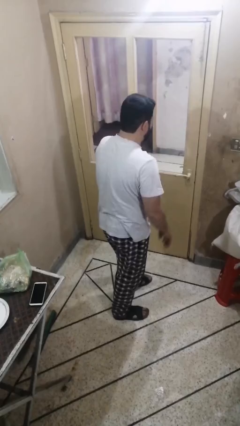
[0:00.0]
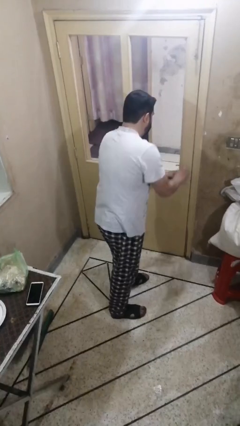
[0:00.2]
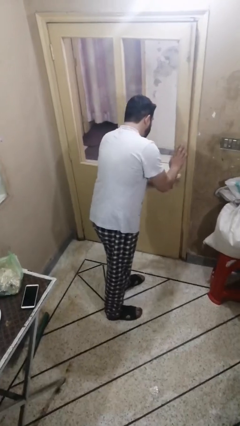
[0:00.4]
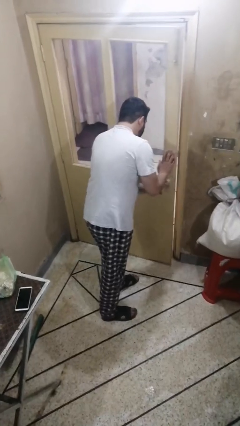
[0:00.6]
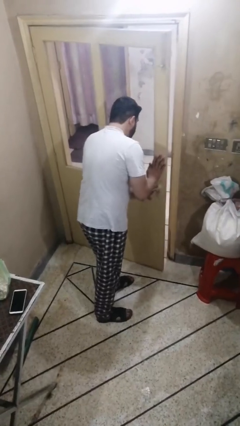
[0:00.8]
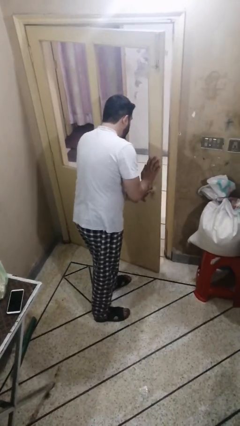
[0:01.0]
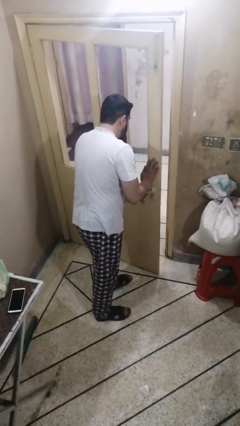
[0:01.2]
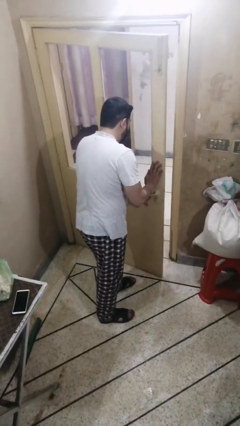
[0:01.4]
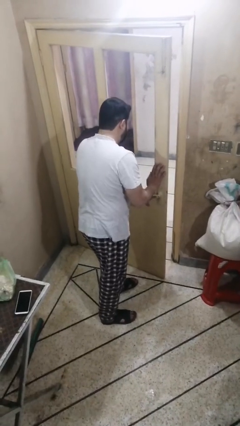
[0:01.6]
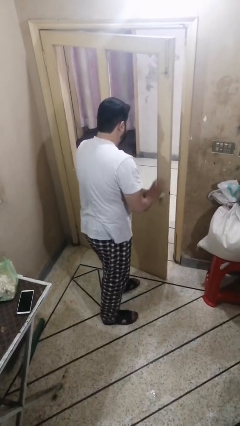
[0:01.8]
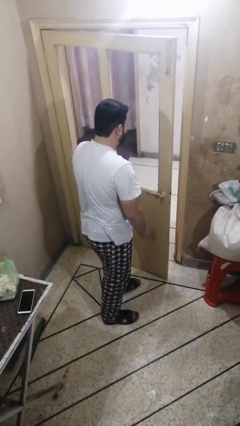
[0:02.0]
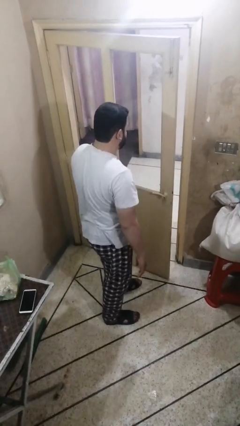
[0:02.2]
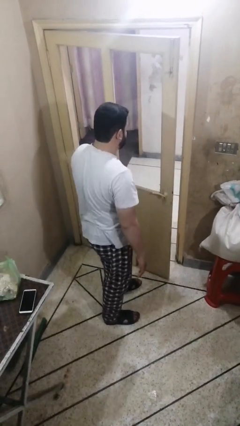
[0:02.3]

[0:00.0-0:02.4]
person opens facility door

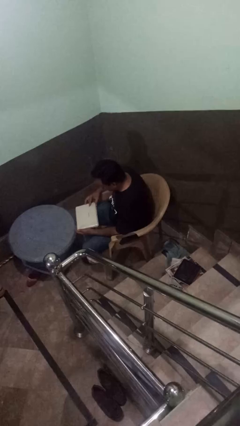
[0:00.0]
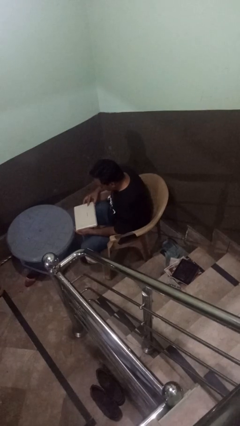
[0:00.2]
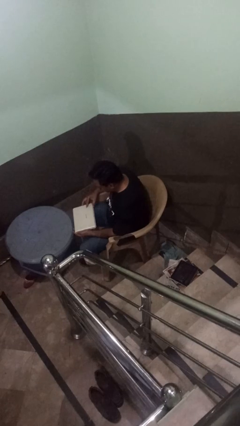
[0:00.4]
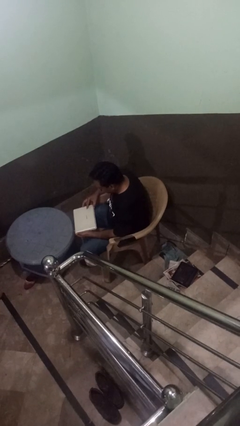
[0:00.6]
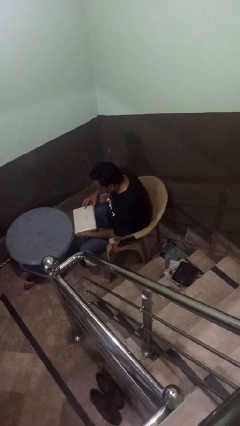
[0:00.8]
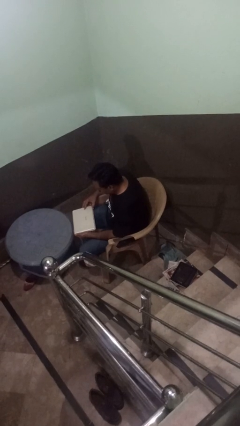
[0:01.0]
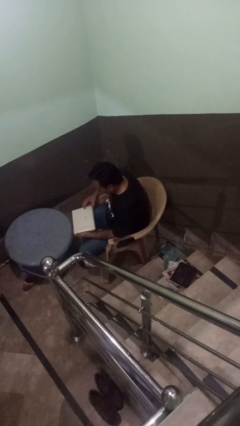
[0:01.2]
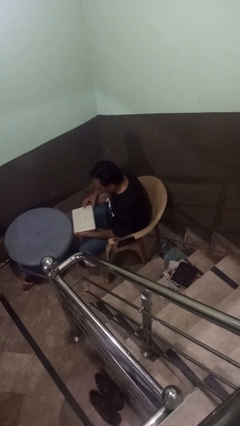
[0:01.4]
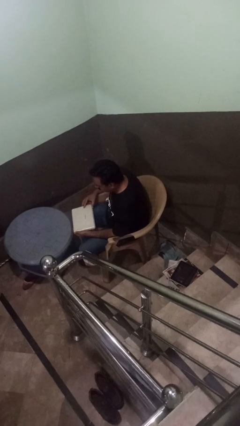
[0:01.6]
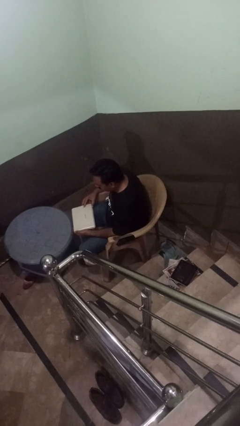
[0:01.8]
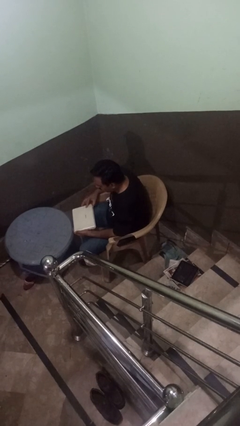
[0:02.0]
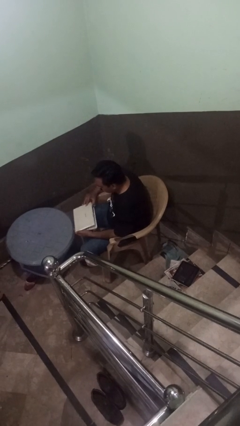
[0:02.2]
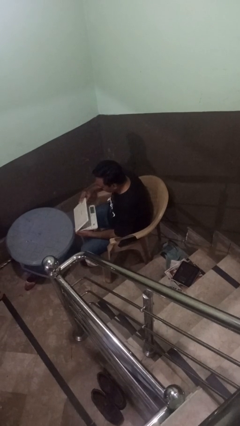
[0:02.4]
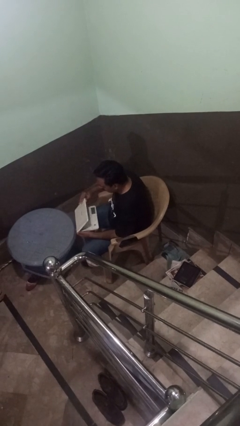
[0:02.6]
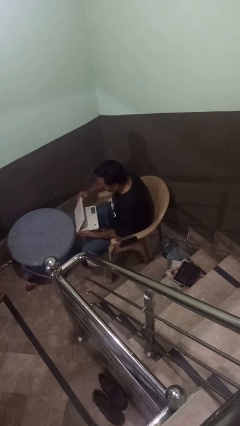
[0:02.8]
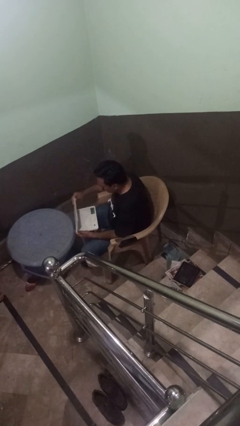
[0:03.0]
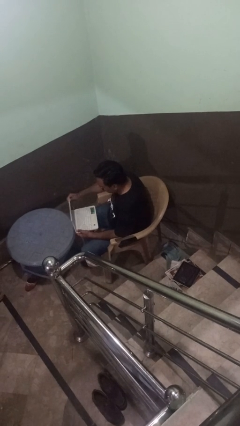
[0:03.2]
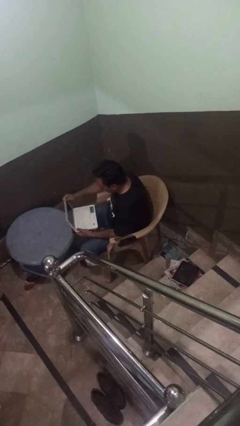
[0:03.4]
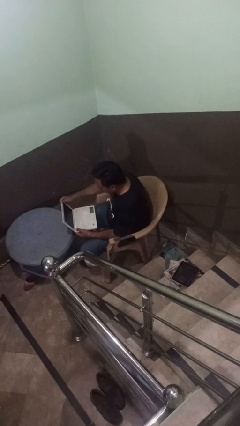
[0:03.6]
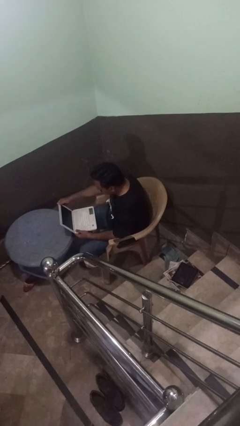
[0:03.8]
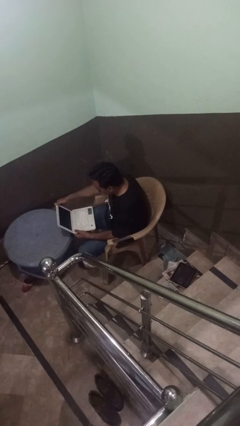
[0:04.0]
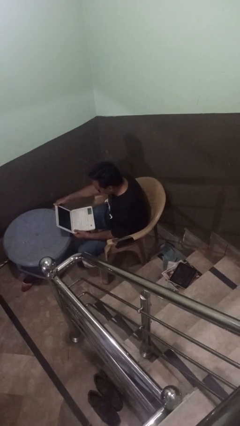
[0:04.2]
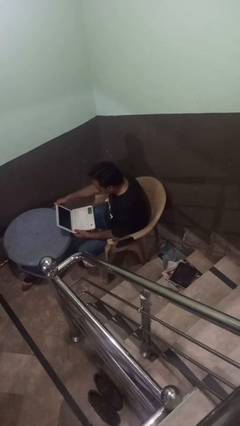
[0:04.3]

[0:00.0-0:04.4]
person opens laptop

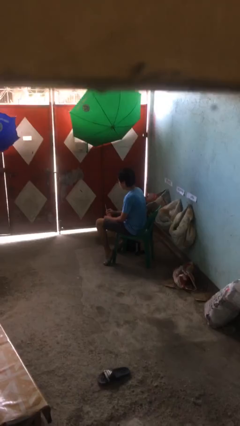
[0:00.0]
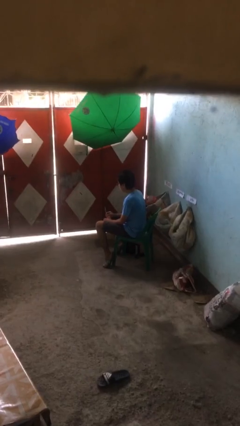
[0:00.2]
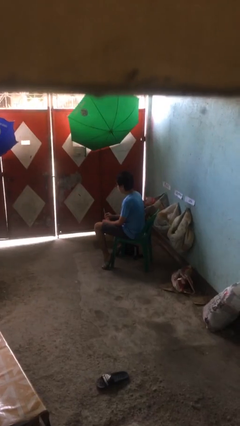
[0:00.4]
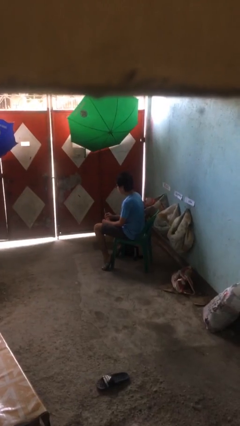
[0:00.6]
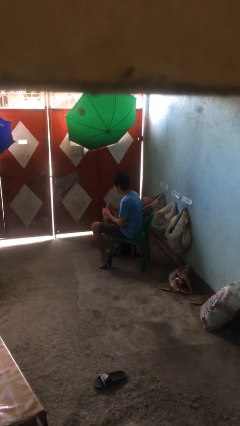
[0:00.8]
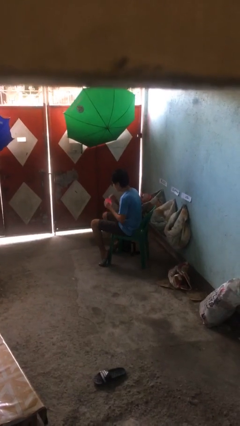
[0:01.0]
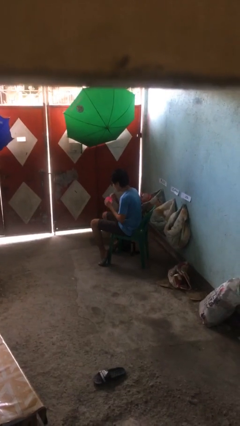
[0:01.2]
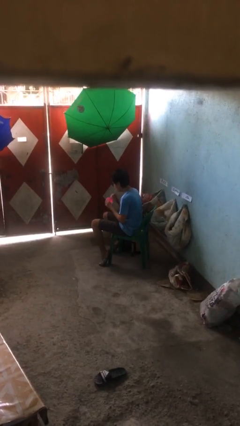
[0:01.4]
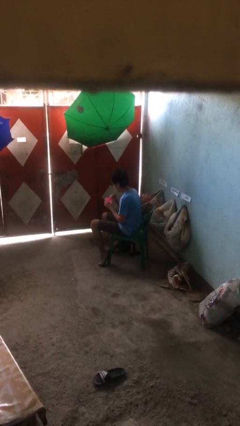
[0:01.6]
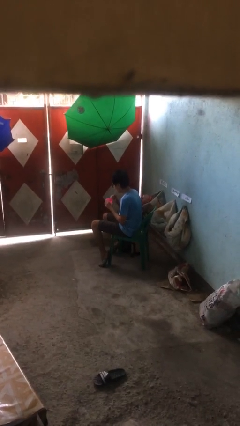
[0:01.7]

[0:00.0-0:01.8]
person drinks from straw

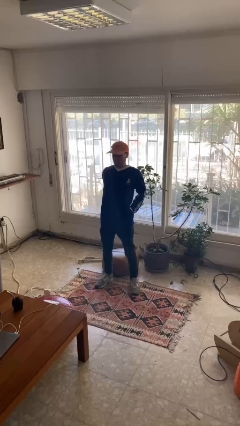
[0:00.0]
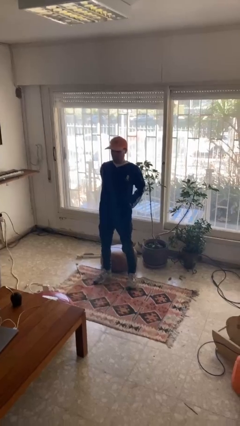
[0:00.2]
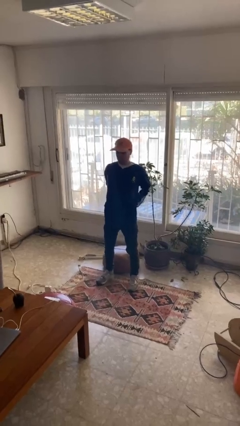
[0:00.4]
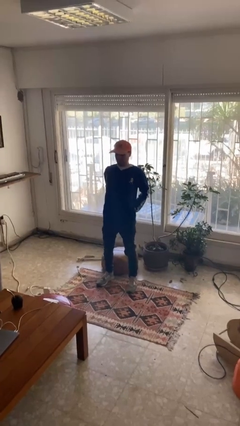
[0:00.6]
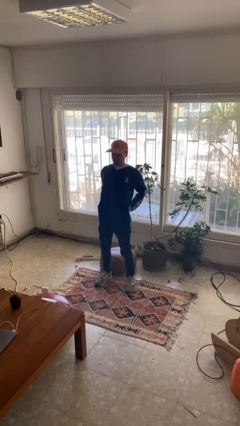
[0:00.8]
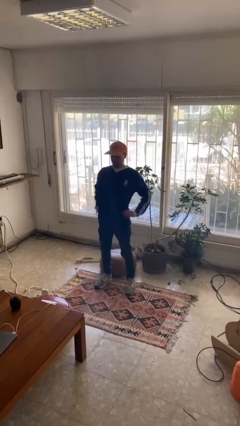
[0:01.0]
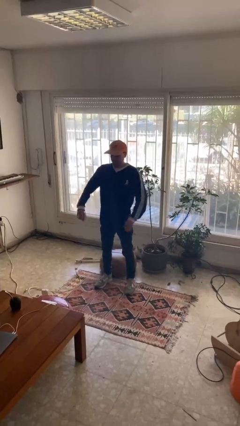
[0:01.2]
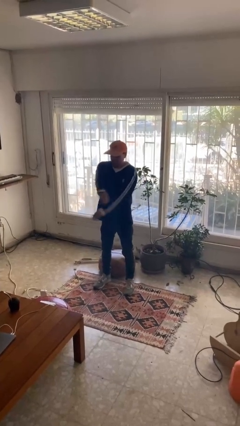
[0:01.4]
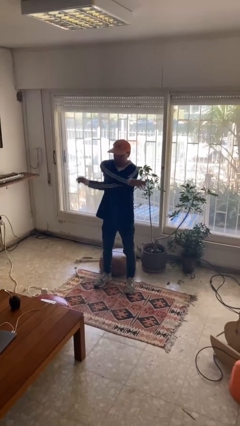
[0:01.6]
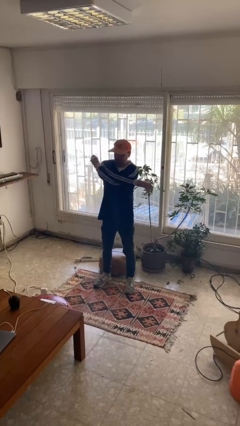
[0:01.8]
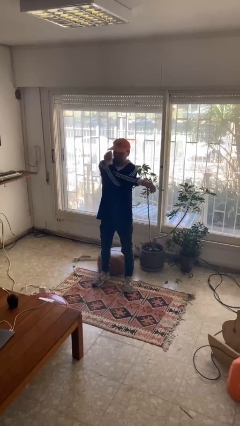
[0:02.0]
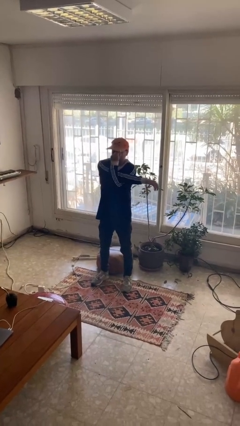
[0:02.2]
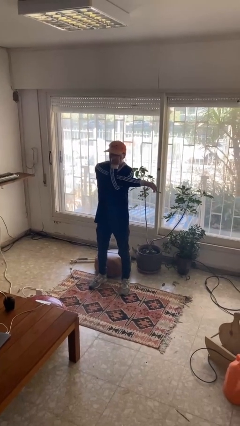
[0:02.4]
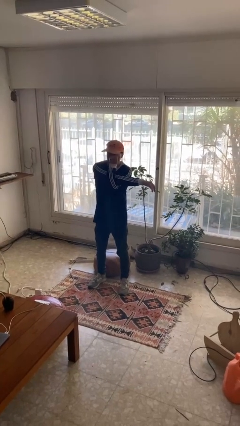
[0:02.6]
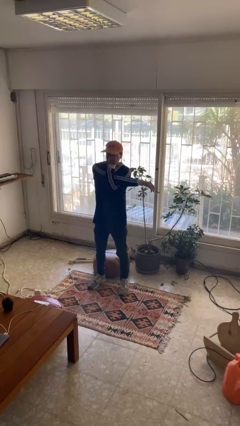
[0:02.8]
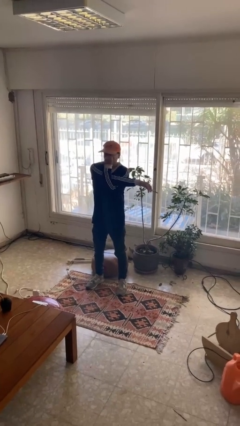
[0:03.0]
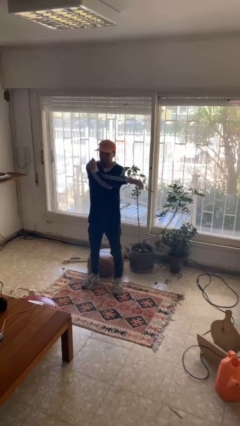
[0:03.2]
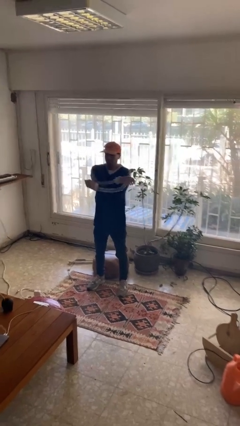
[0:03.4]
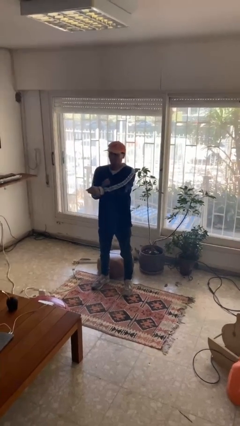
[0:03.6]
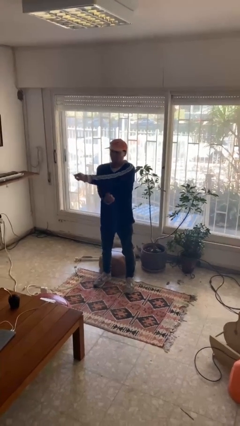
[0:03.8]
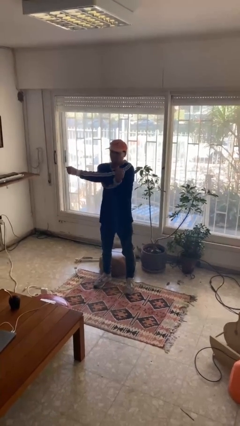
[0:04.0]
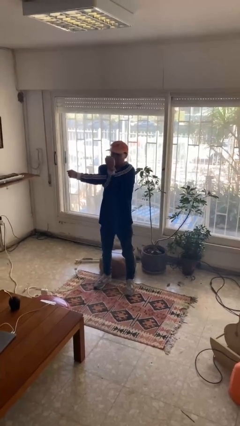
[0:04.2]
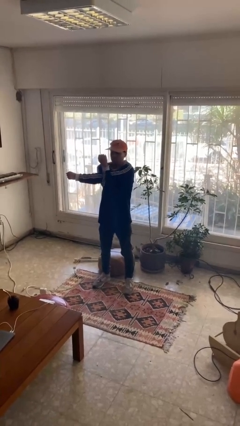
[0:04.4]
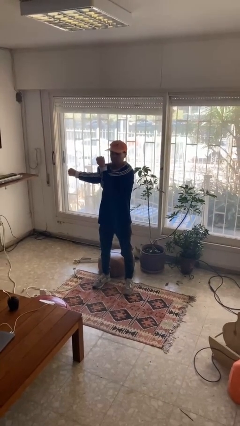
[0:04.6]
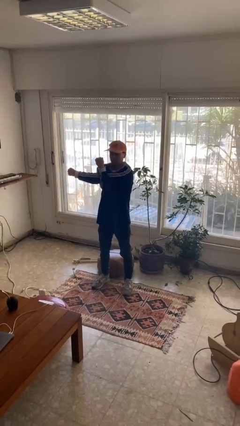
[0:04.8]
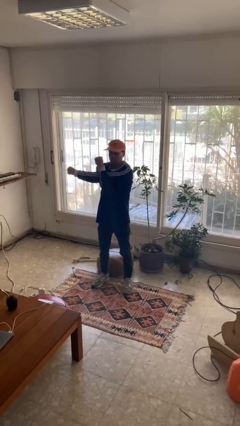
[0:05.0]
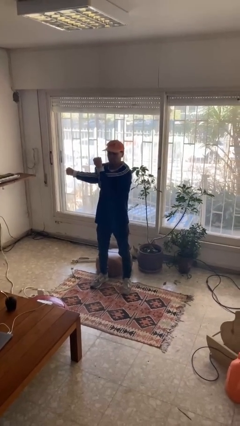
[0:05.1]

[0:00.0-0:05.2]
person stretches arms to side

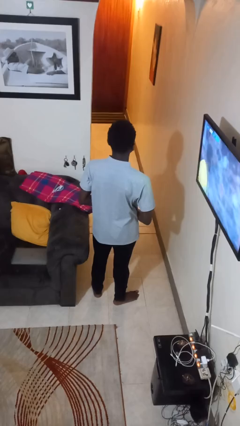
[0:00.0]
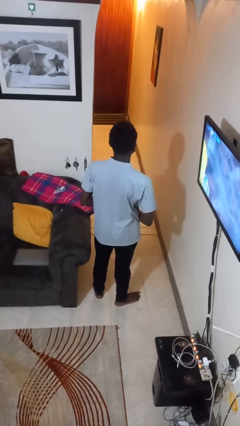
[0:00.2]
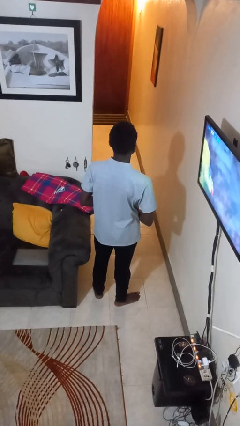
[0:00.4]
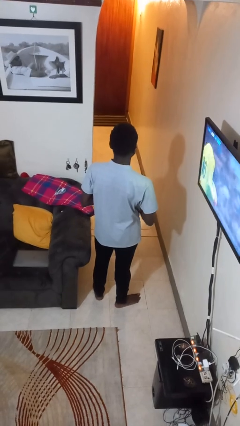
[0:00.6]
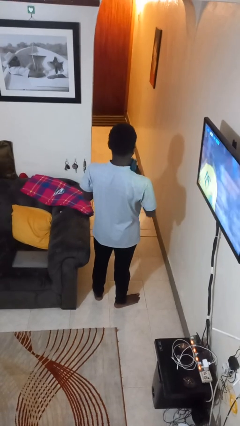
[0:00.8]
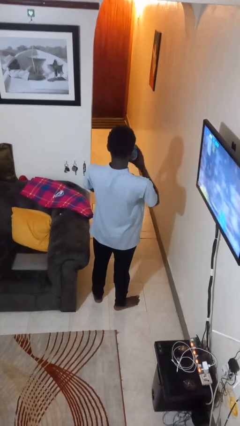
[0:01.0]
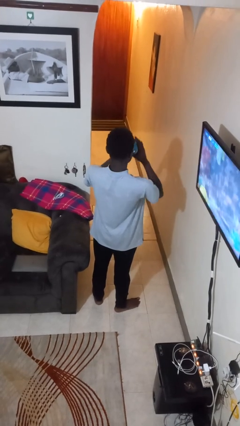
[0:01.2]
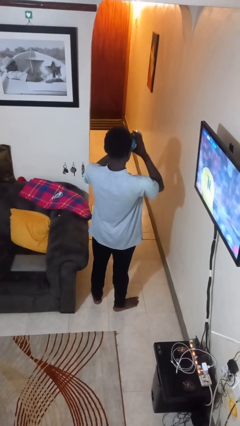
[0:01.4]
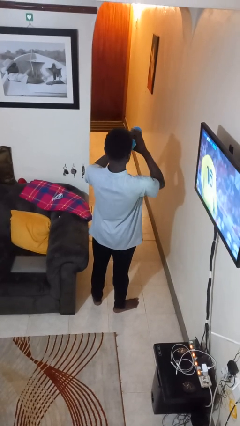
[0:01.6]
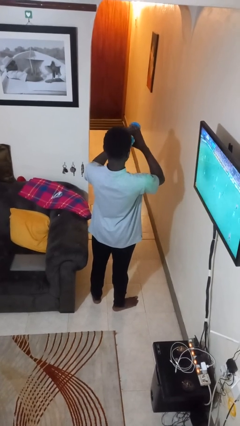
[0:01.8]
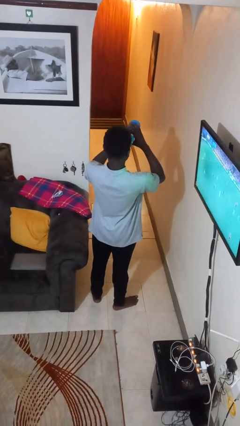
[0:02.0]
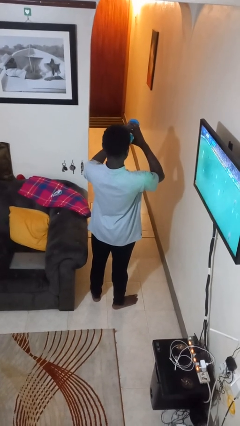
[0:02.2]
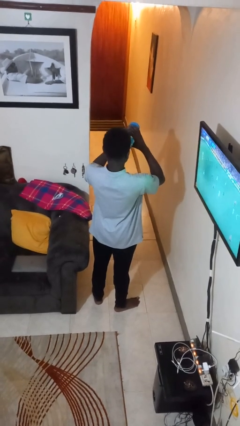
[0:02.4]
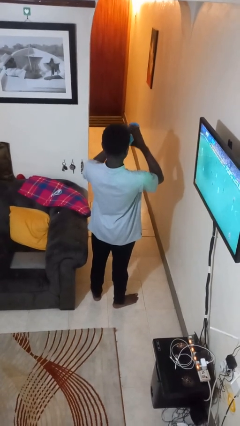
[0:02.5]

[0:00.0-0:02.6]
person drinks from bottle

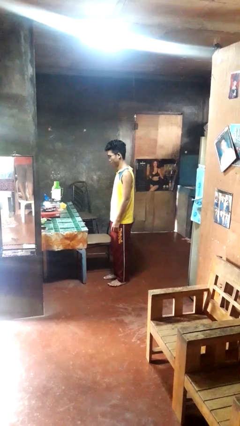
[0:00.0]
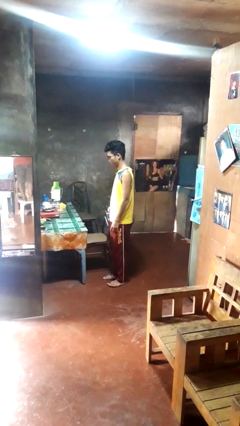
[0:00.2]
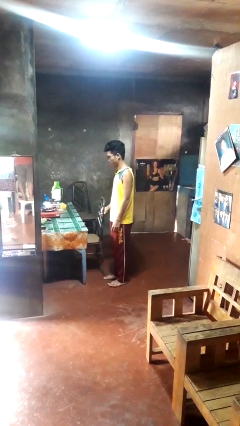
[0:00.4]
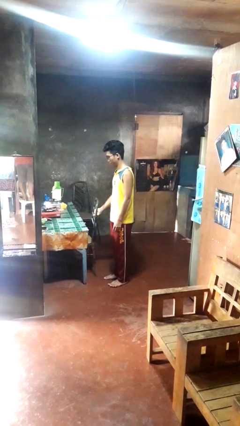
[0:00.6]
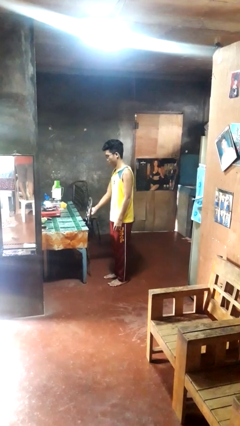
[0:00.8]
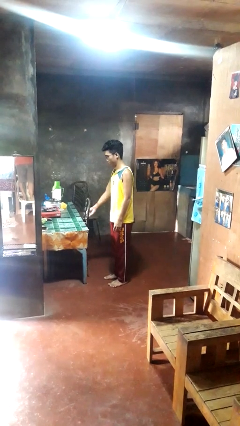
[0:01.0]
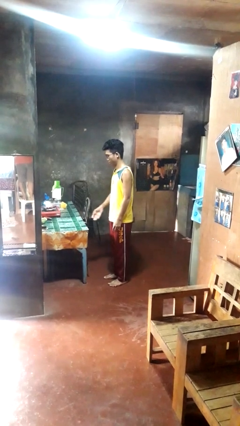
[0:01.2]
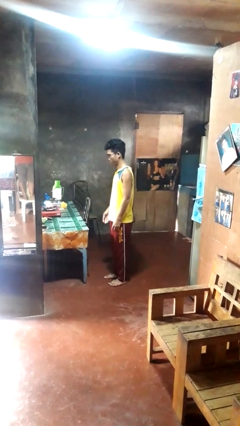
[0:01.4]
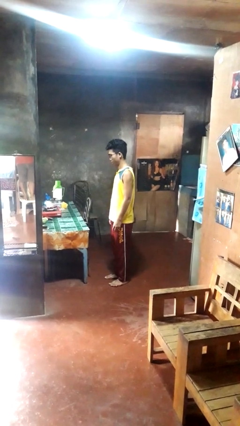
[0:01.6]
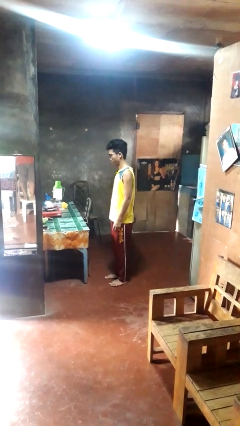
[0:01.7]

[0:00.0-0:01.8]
person pushes in chair
